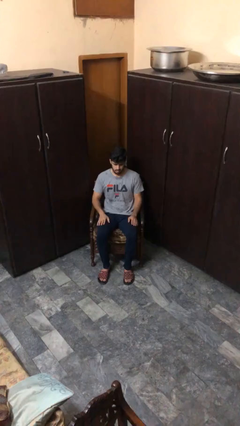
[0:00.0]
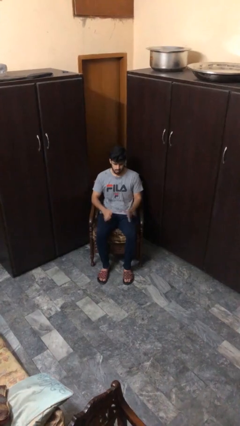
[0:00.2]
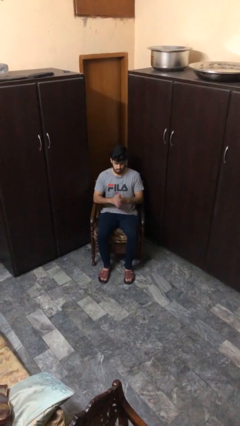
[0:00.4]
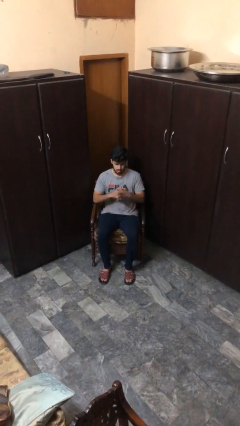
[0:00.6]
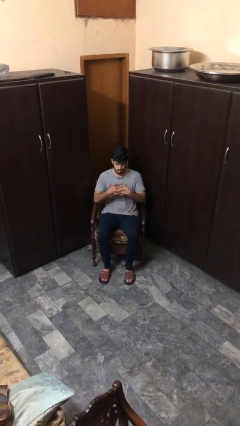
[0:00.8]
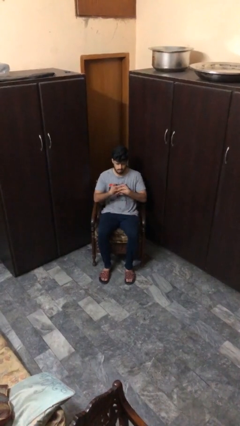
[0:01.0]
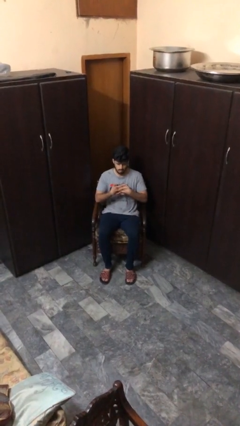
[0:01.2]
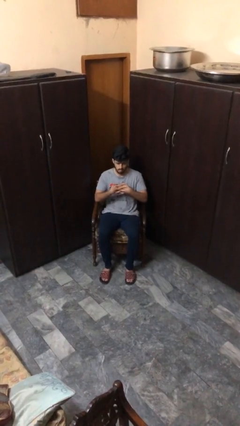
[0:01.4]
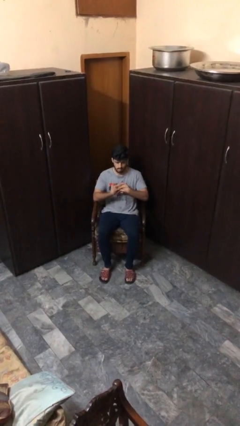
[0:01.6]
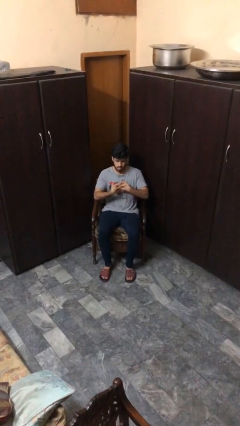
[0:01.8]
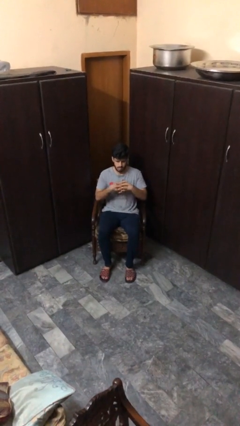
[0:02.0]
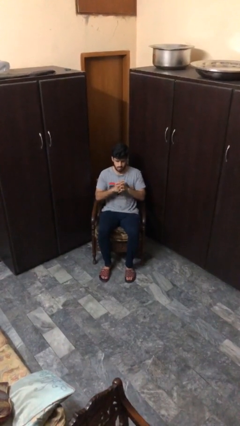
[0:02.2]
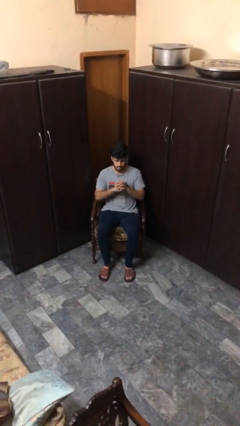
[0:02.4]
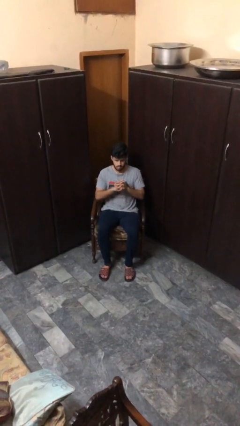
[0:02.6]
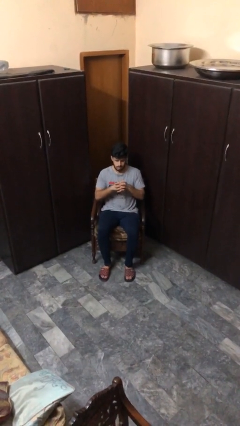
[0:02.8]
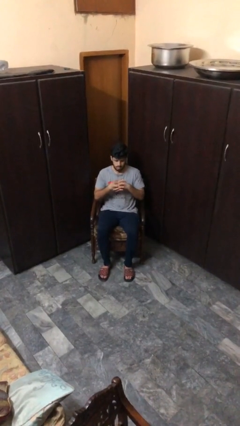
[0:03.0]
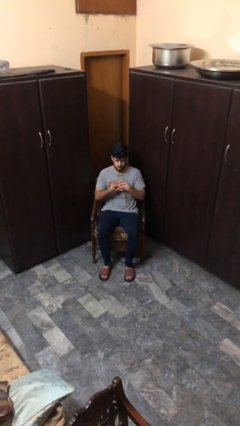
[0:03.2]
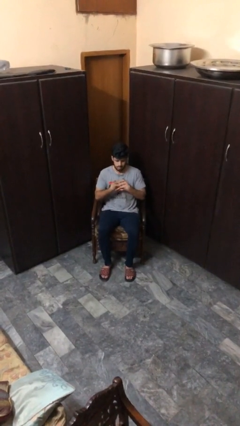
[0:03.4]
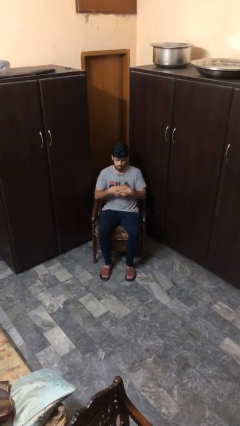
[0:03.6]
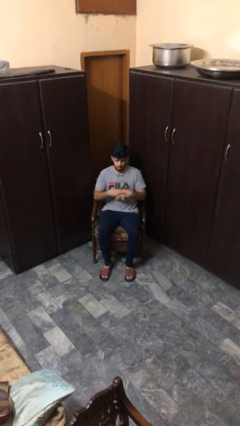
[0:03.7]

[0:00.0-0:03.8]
person cracks knuckles

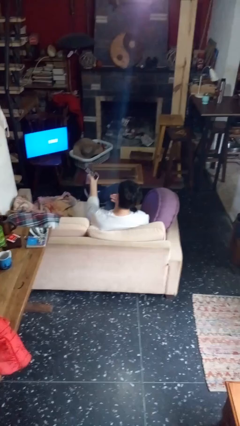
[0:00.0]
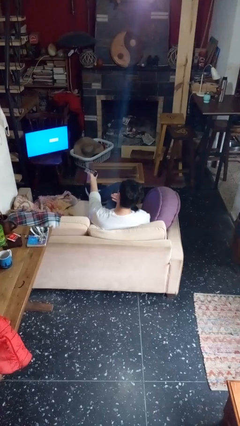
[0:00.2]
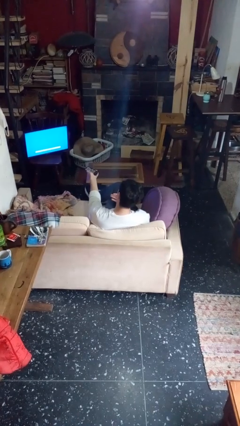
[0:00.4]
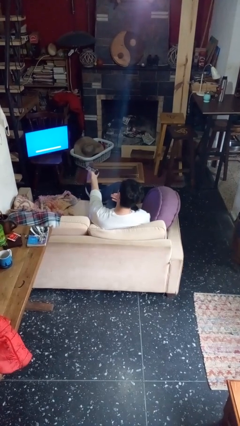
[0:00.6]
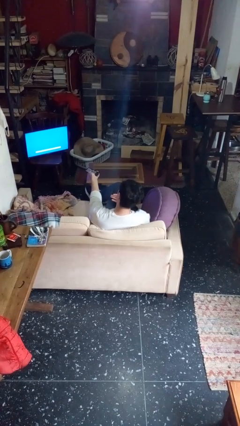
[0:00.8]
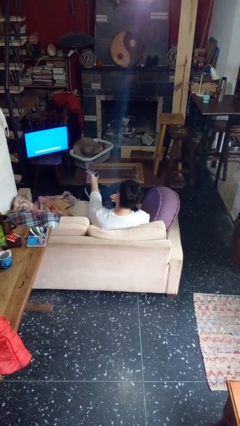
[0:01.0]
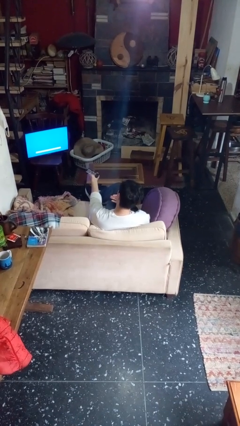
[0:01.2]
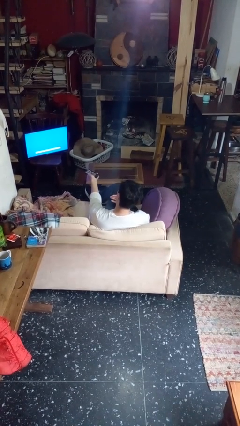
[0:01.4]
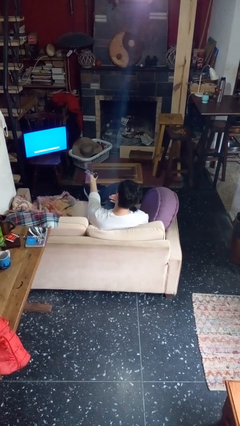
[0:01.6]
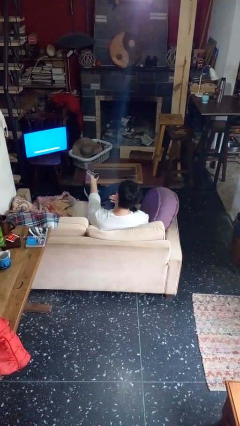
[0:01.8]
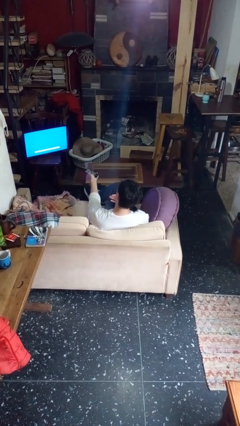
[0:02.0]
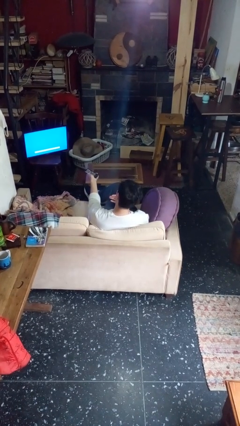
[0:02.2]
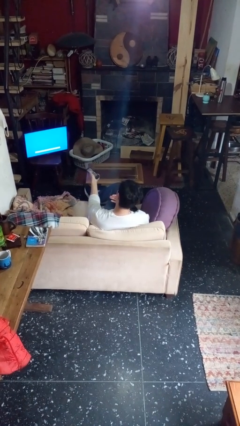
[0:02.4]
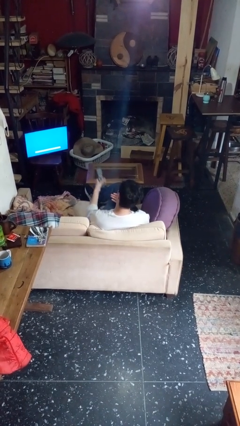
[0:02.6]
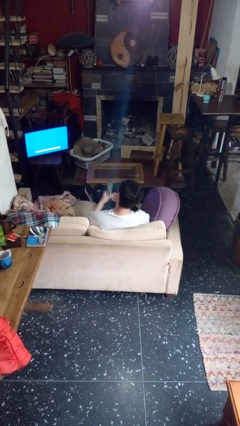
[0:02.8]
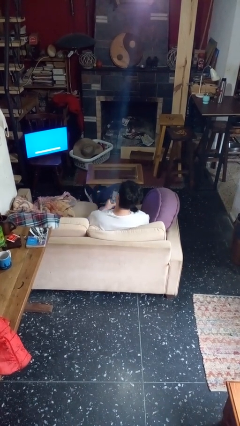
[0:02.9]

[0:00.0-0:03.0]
person uses television remote

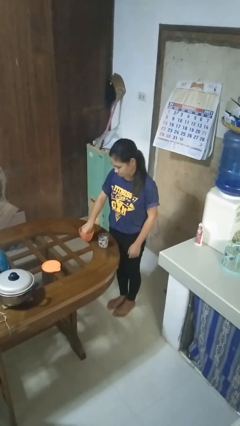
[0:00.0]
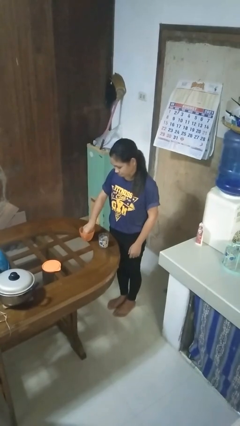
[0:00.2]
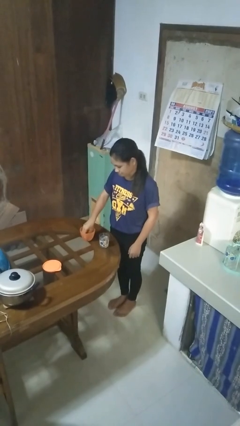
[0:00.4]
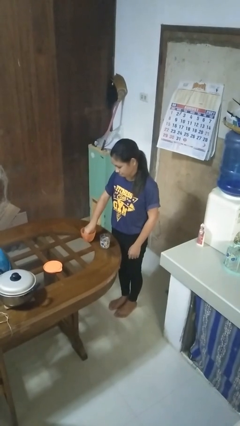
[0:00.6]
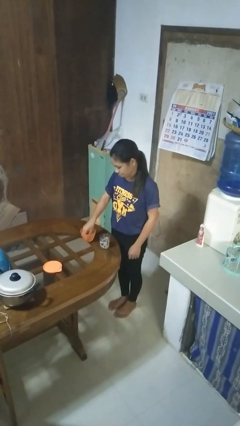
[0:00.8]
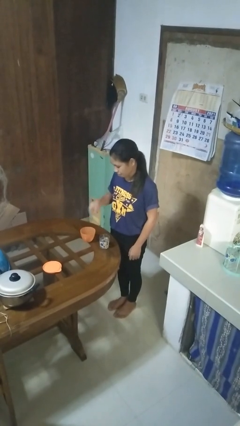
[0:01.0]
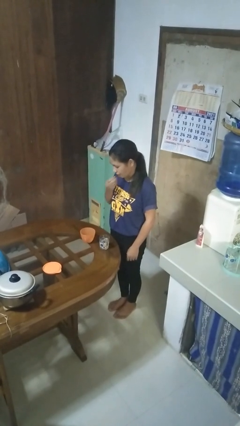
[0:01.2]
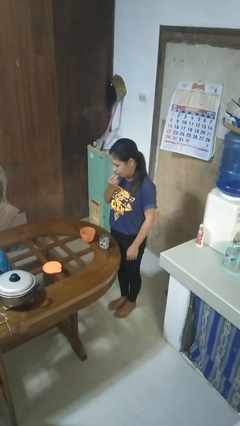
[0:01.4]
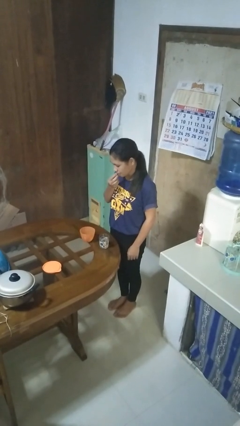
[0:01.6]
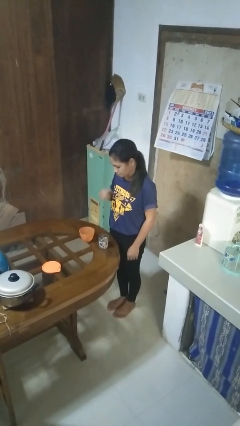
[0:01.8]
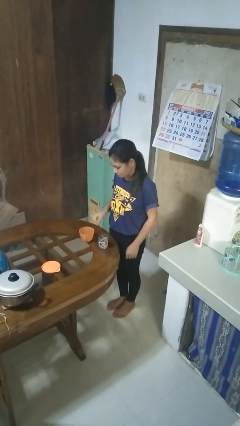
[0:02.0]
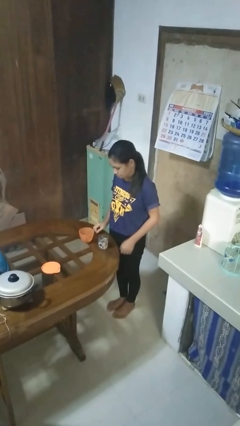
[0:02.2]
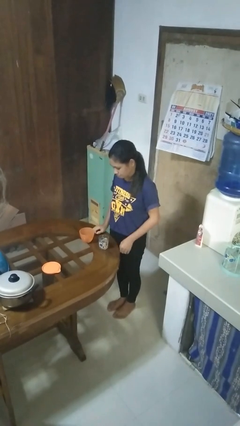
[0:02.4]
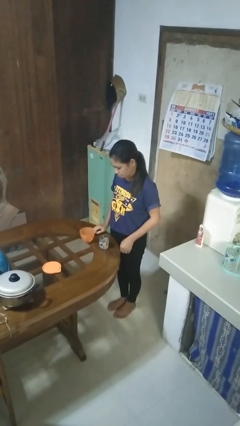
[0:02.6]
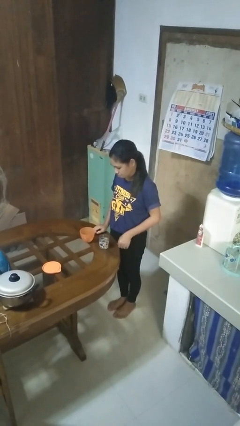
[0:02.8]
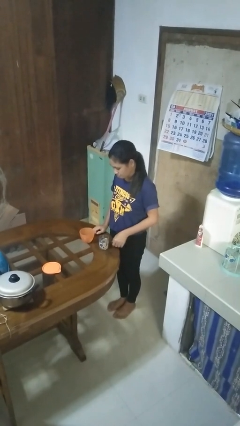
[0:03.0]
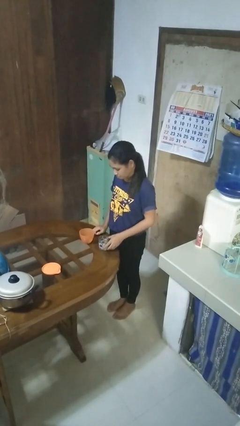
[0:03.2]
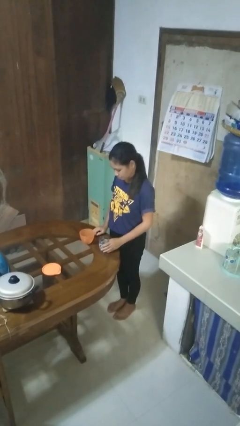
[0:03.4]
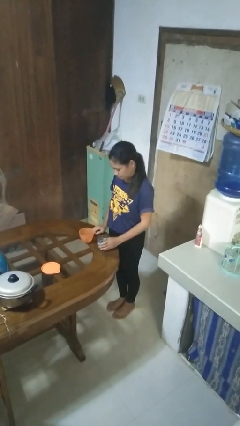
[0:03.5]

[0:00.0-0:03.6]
person takes medicine pills

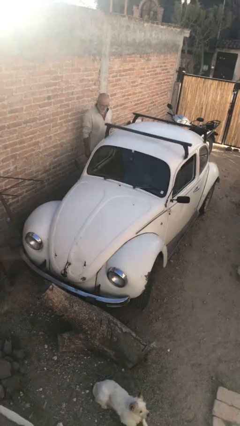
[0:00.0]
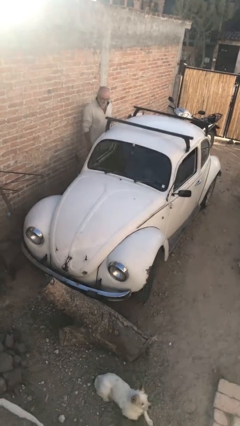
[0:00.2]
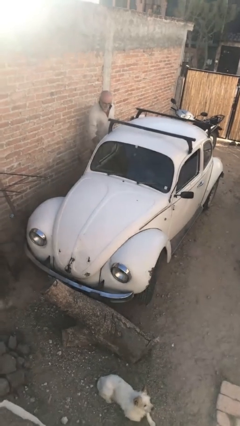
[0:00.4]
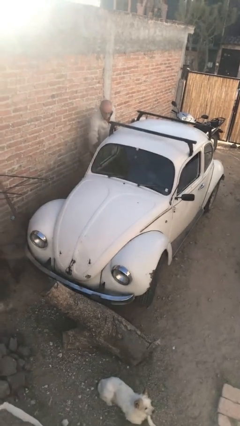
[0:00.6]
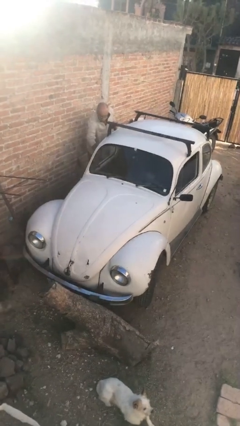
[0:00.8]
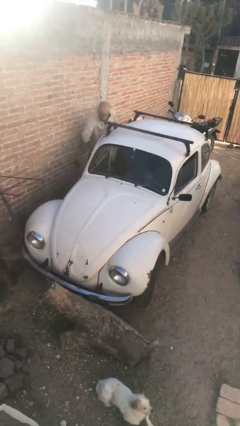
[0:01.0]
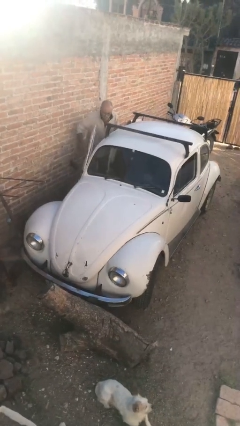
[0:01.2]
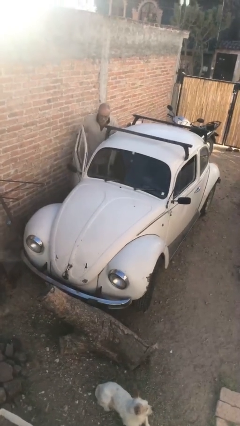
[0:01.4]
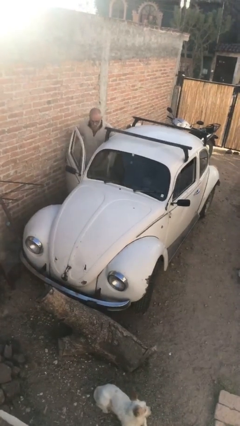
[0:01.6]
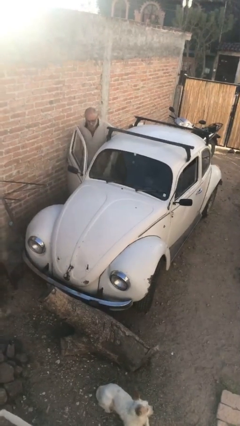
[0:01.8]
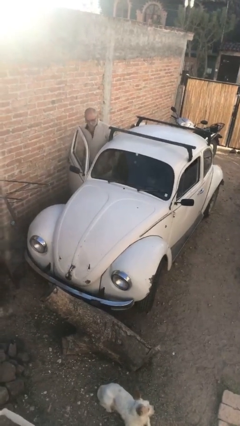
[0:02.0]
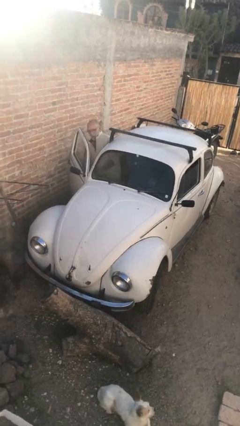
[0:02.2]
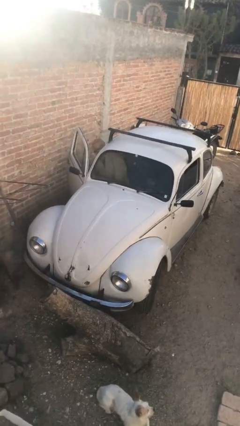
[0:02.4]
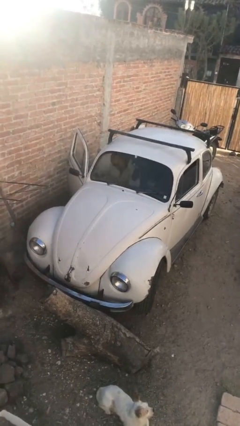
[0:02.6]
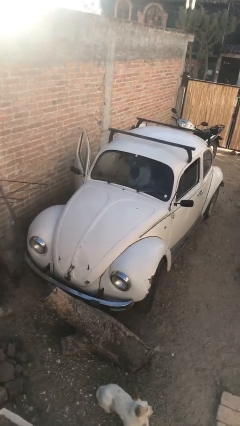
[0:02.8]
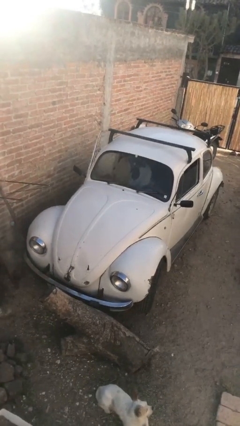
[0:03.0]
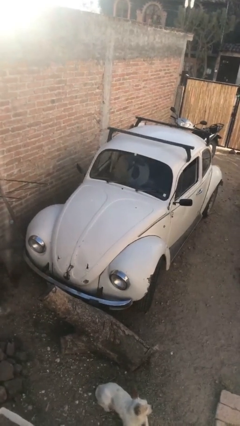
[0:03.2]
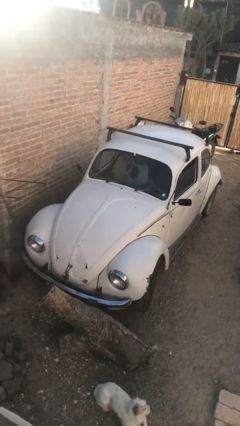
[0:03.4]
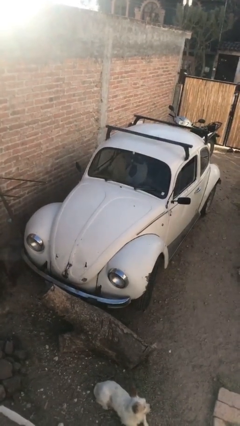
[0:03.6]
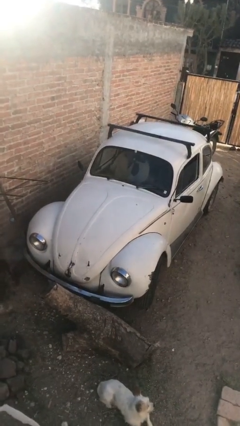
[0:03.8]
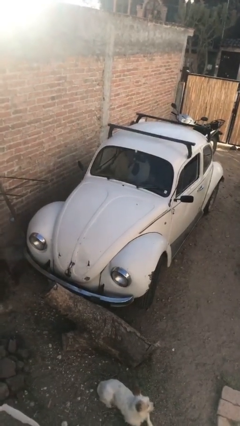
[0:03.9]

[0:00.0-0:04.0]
car picks up person

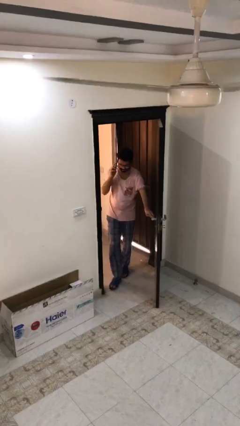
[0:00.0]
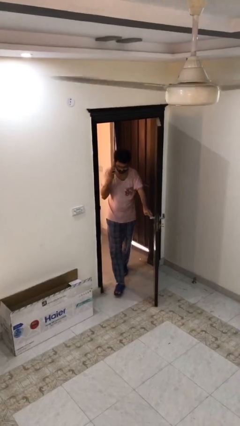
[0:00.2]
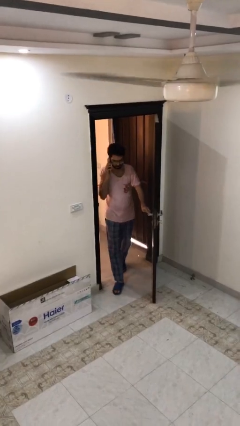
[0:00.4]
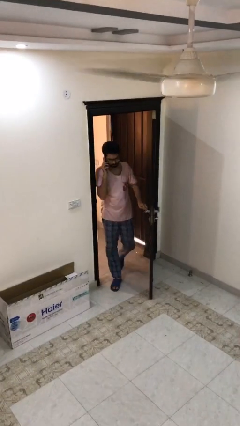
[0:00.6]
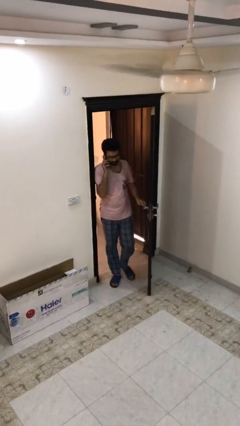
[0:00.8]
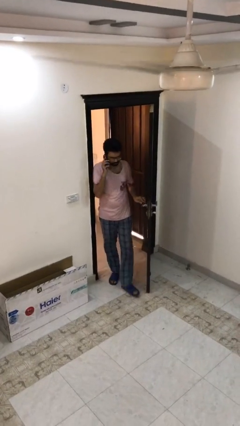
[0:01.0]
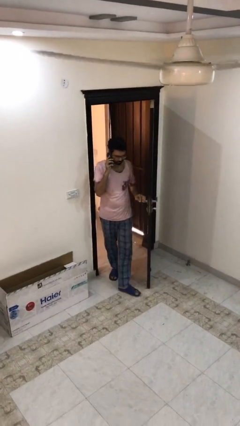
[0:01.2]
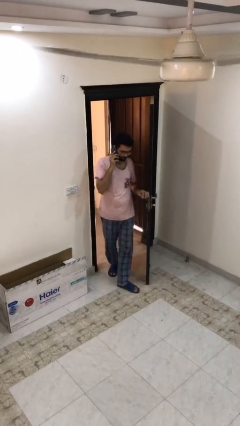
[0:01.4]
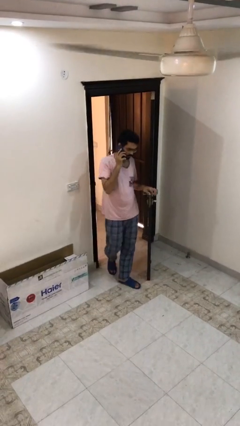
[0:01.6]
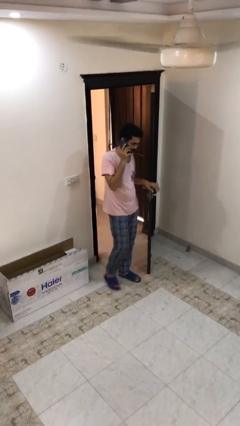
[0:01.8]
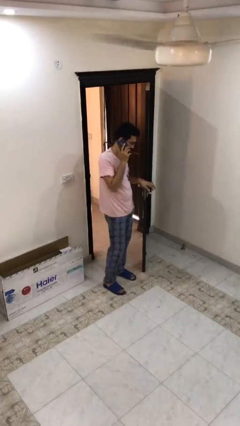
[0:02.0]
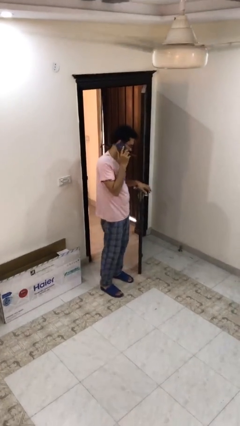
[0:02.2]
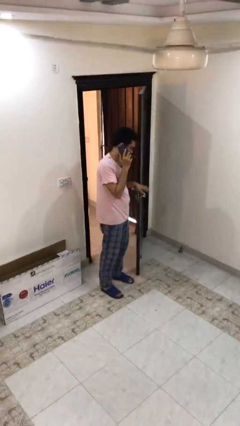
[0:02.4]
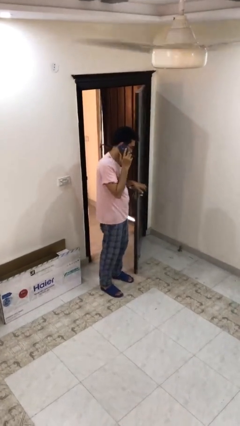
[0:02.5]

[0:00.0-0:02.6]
person enters scene through structure
